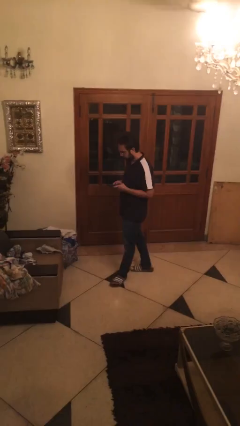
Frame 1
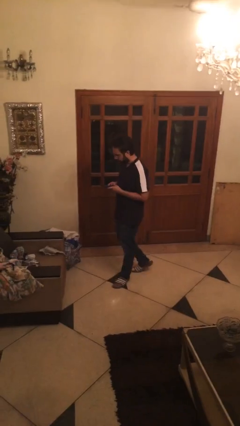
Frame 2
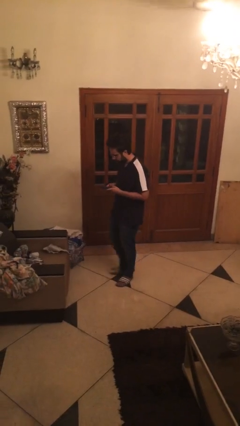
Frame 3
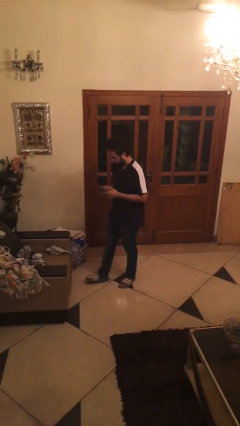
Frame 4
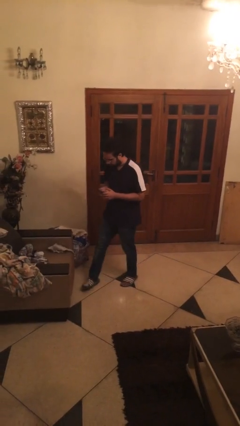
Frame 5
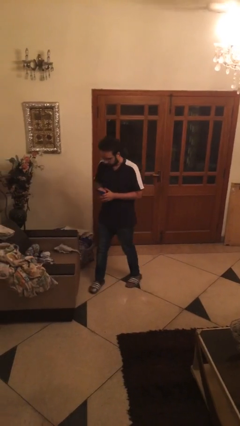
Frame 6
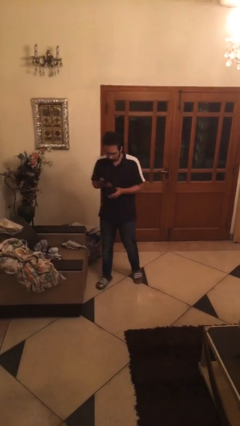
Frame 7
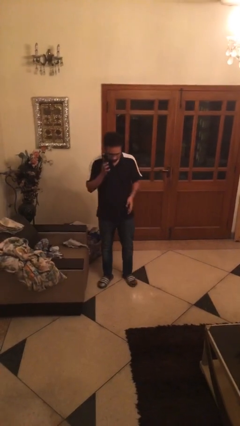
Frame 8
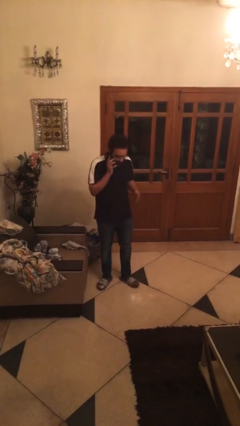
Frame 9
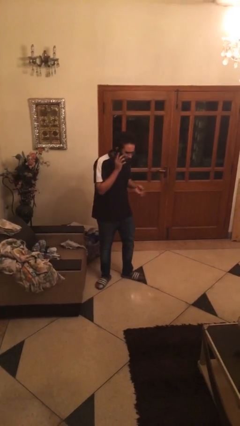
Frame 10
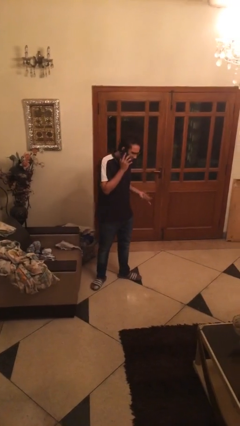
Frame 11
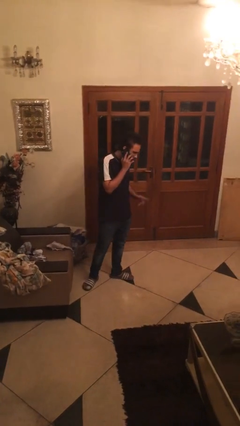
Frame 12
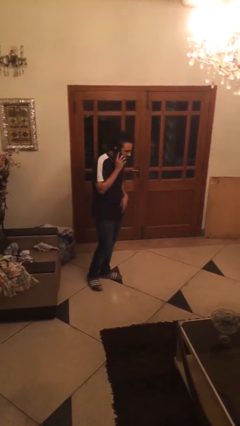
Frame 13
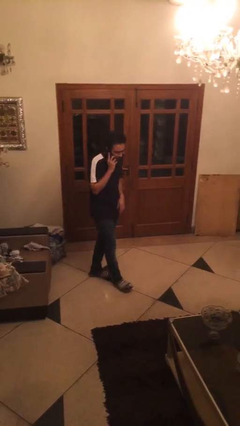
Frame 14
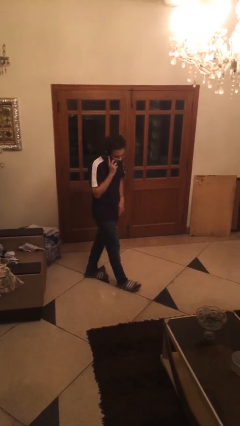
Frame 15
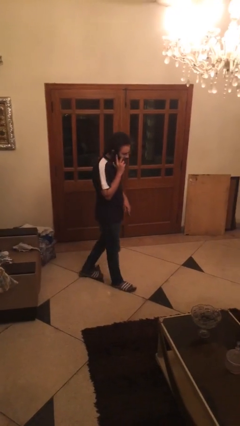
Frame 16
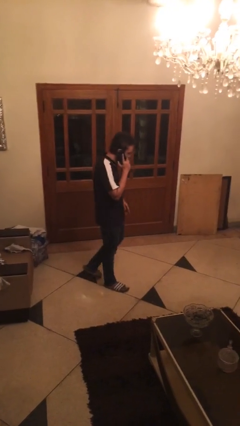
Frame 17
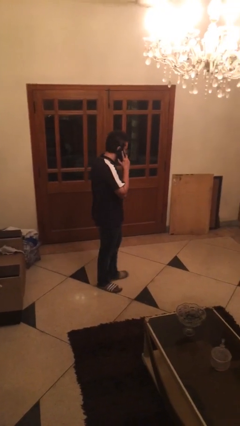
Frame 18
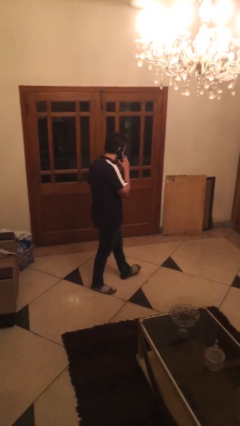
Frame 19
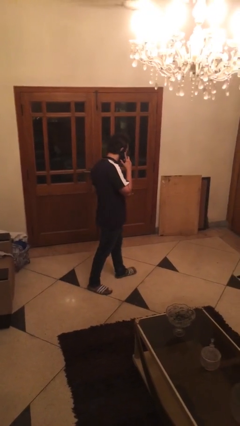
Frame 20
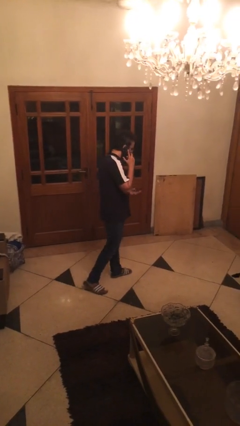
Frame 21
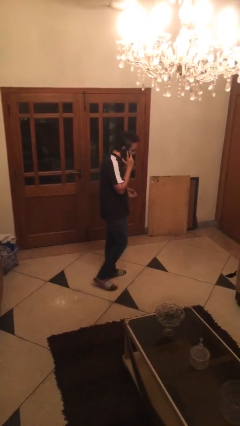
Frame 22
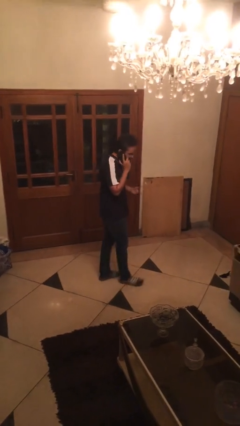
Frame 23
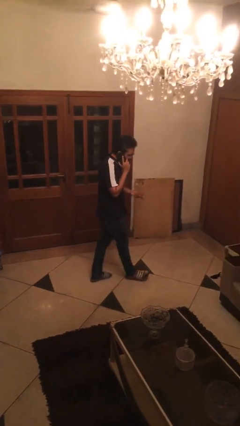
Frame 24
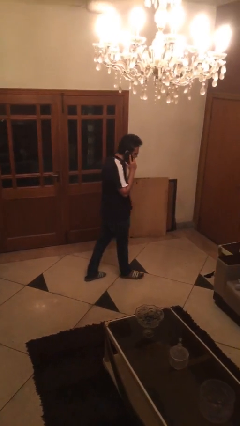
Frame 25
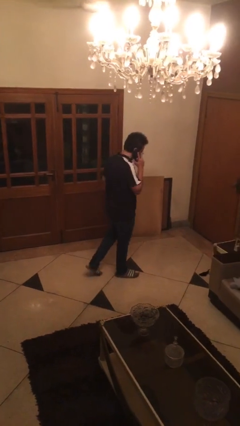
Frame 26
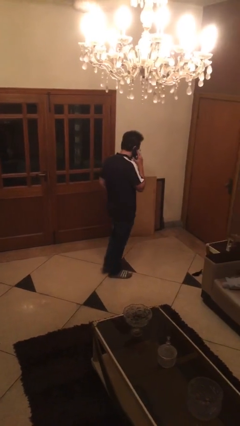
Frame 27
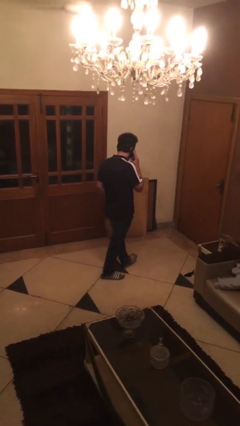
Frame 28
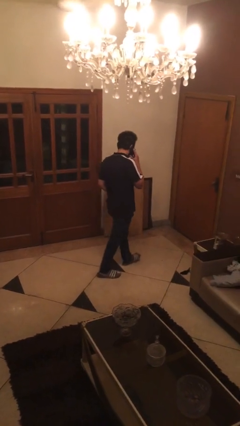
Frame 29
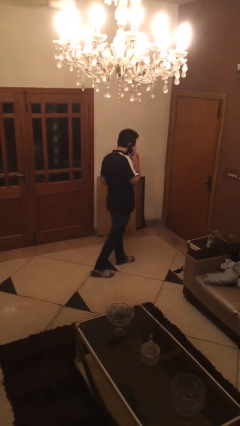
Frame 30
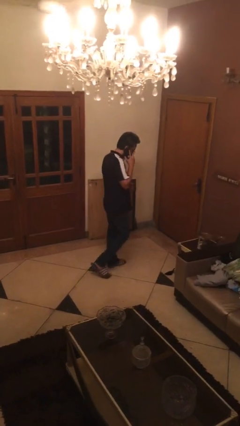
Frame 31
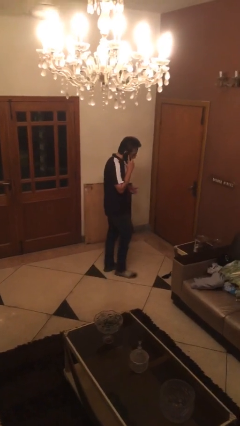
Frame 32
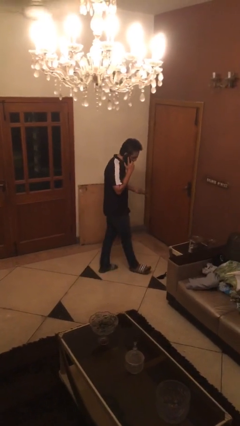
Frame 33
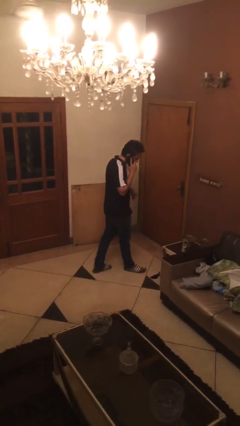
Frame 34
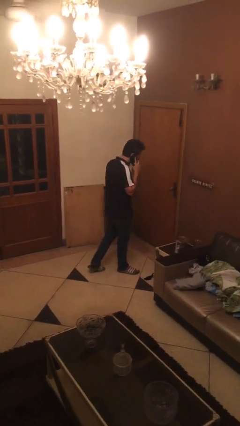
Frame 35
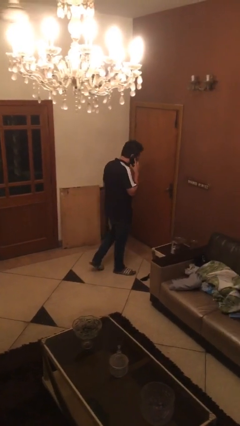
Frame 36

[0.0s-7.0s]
person talks on phone

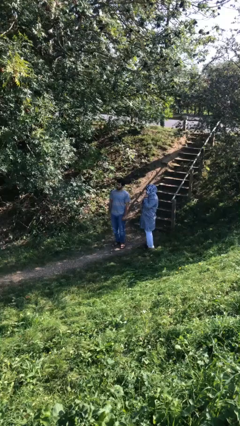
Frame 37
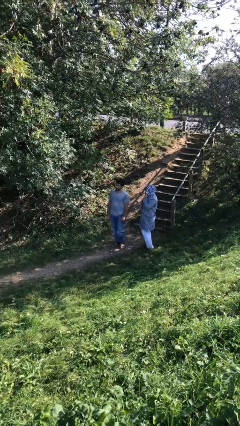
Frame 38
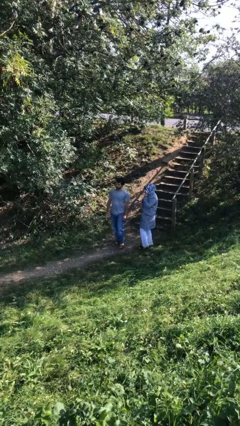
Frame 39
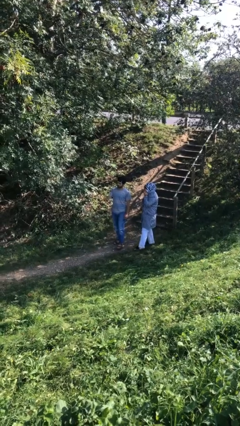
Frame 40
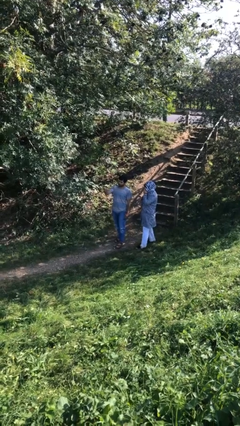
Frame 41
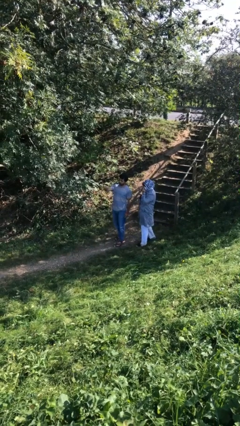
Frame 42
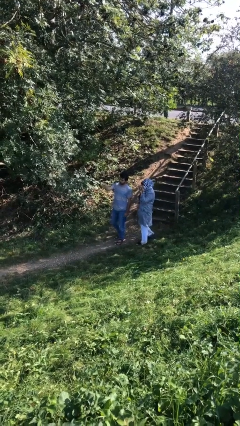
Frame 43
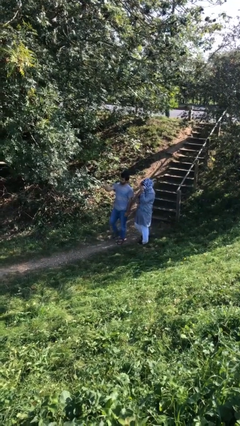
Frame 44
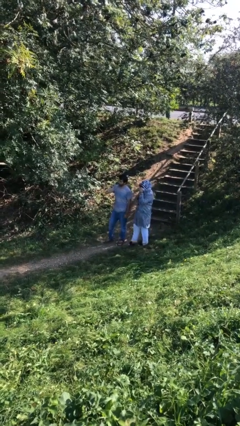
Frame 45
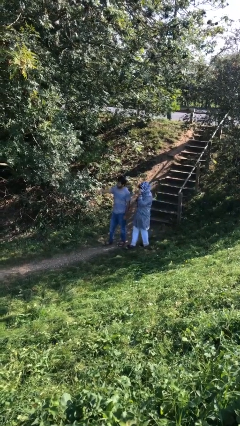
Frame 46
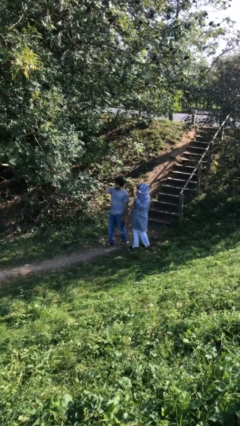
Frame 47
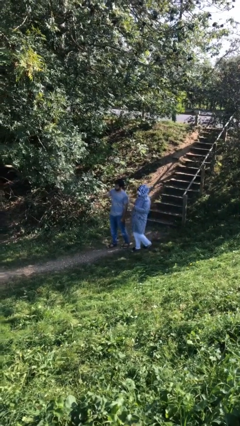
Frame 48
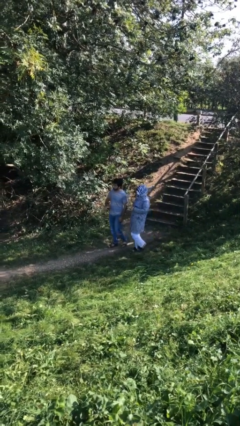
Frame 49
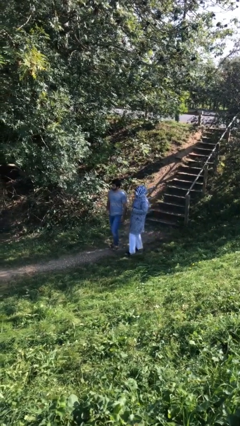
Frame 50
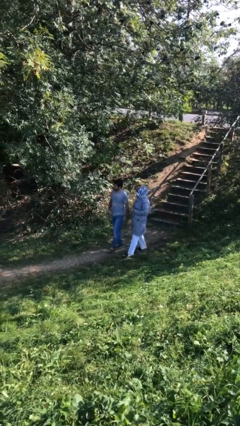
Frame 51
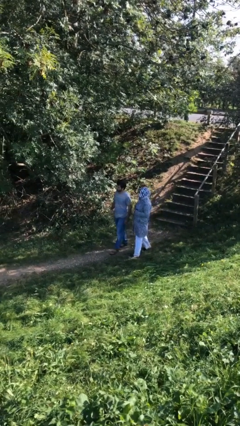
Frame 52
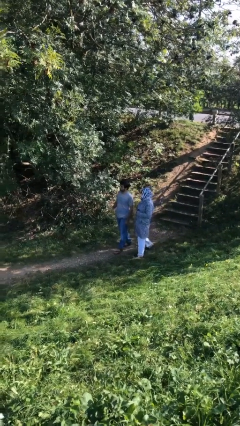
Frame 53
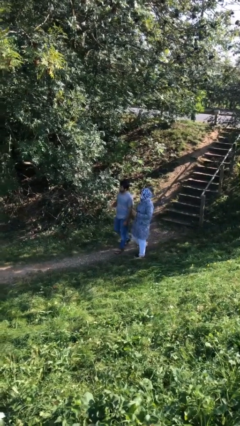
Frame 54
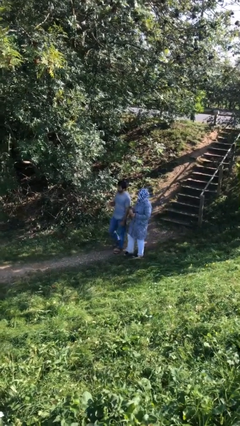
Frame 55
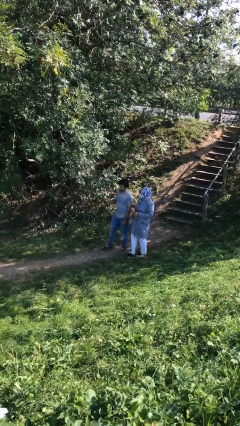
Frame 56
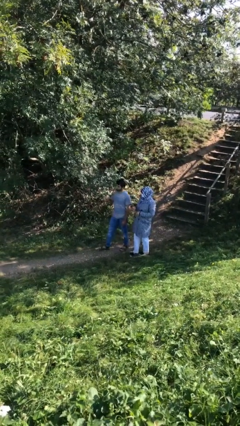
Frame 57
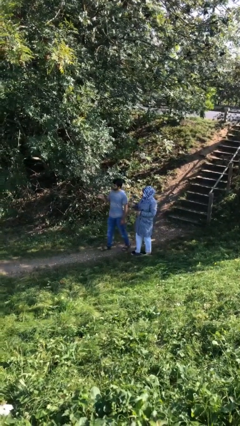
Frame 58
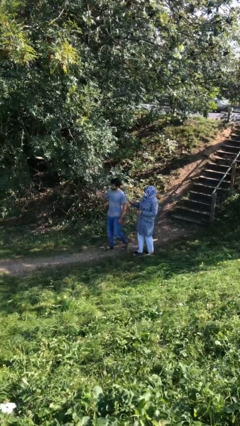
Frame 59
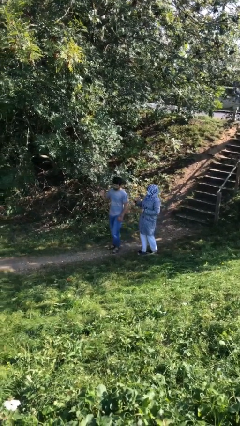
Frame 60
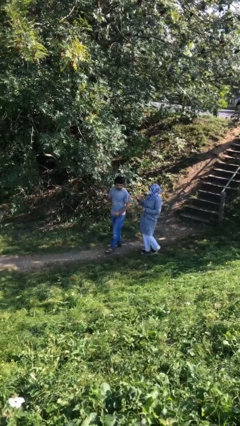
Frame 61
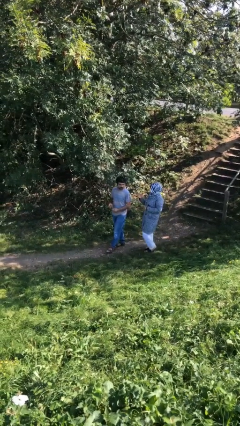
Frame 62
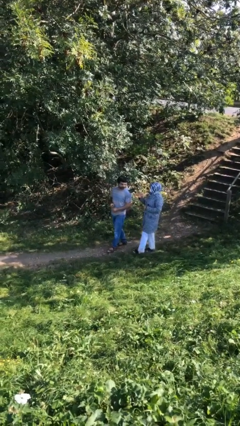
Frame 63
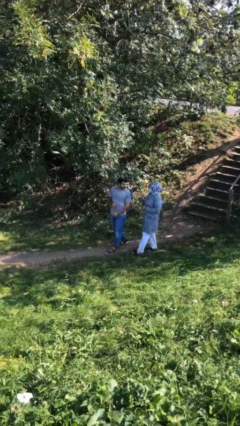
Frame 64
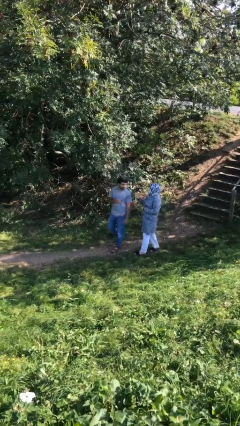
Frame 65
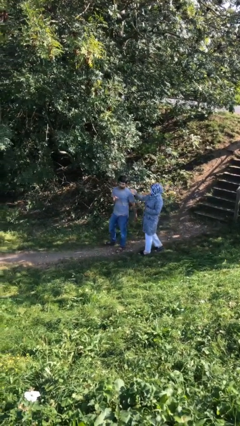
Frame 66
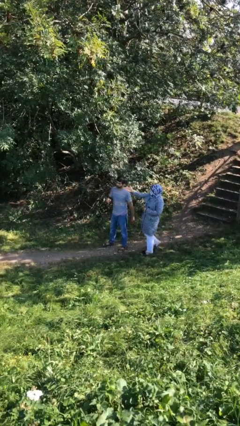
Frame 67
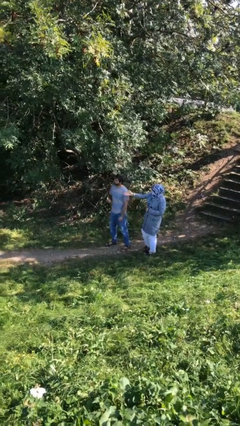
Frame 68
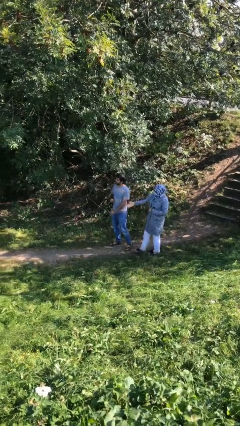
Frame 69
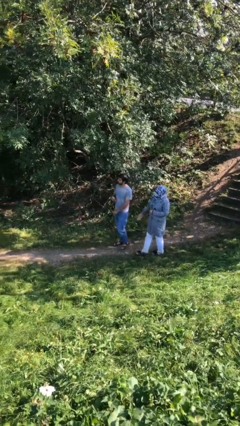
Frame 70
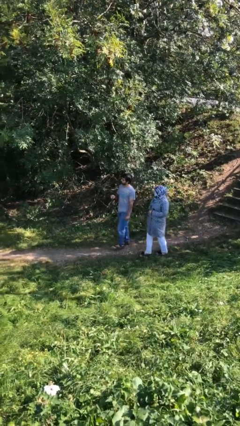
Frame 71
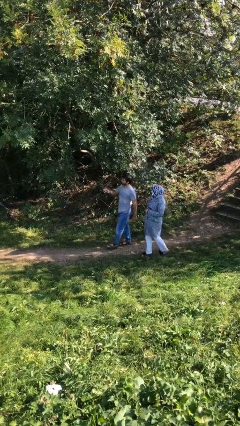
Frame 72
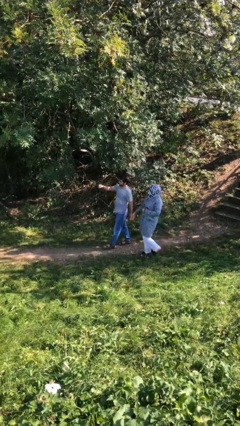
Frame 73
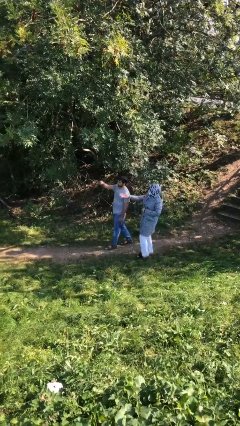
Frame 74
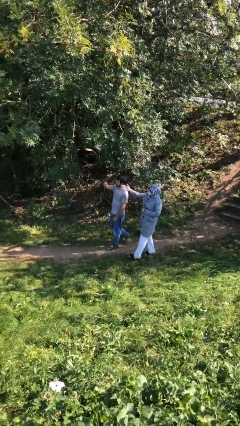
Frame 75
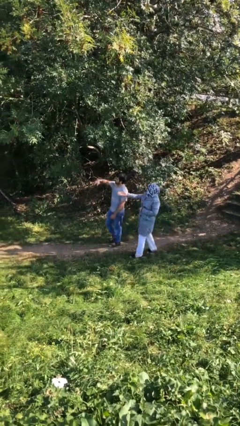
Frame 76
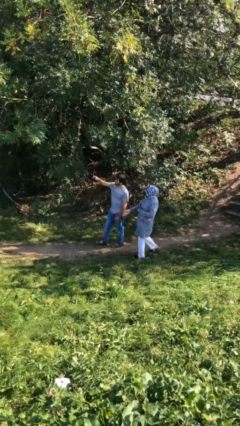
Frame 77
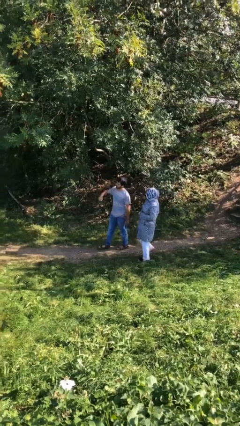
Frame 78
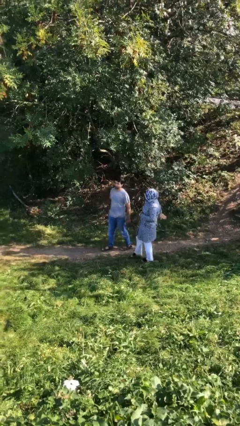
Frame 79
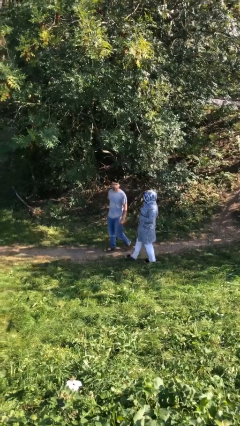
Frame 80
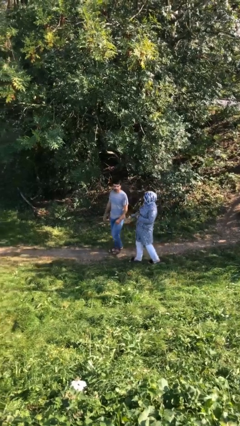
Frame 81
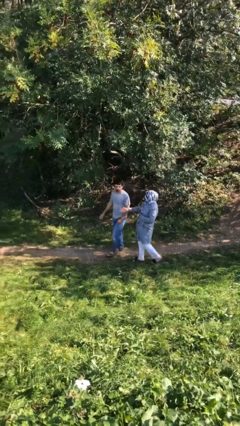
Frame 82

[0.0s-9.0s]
person talks to person

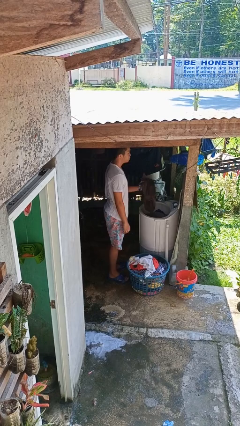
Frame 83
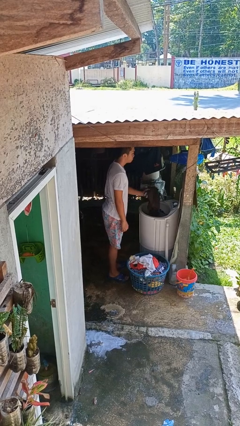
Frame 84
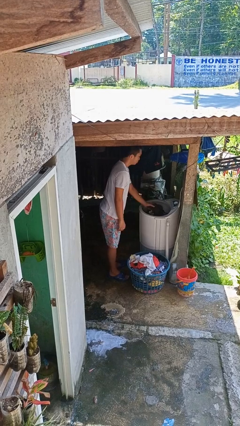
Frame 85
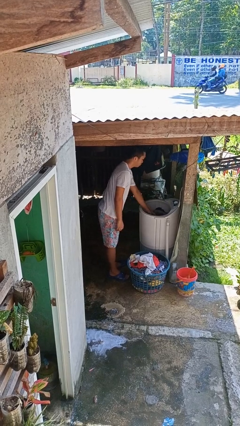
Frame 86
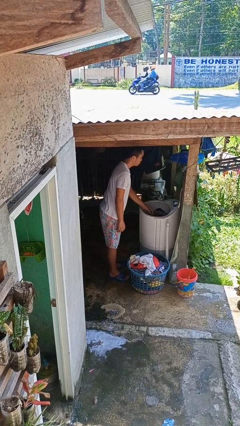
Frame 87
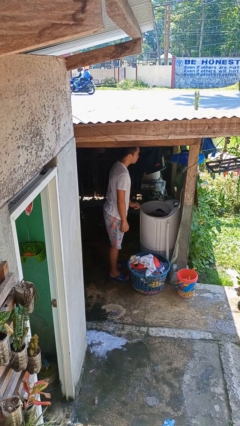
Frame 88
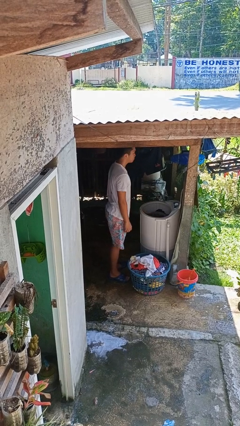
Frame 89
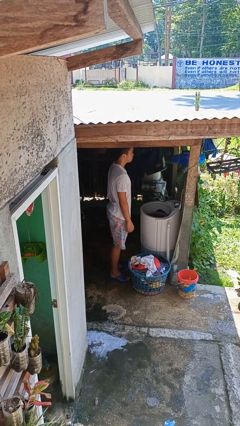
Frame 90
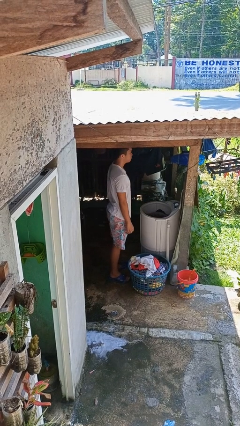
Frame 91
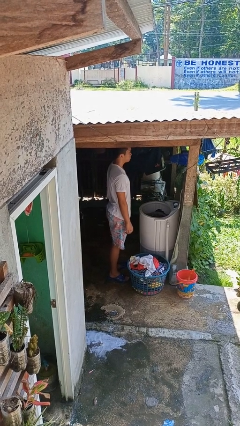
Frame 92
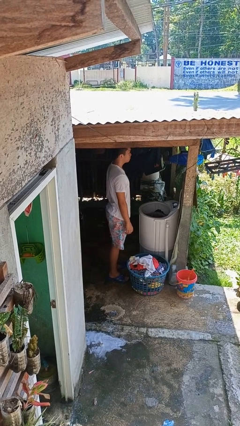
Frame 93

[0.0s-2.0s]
person loads clotheswasher
